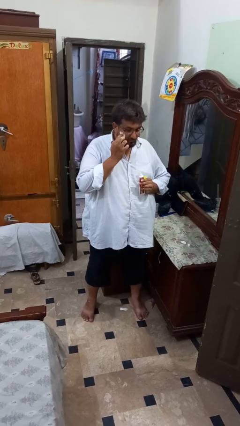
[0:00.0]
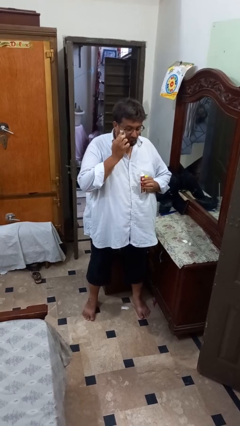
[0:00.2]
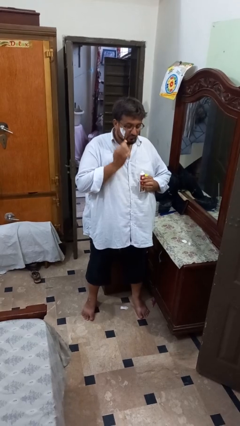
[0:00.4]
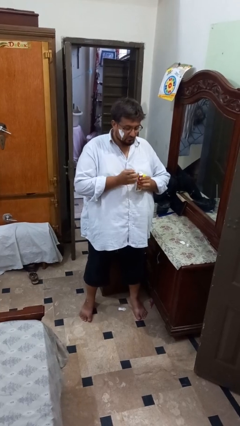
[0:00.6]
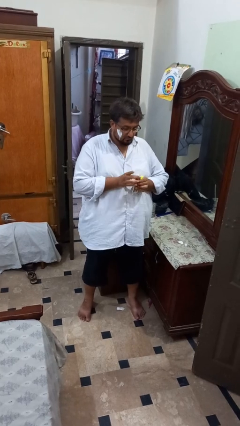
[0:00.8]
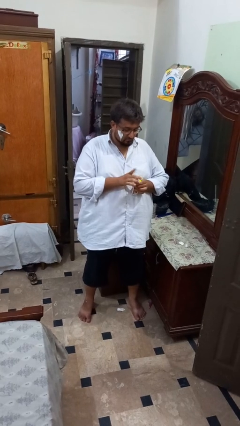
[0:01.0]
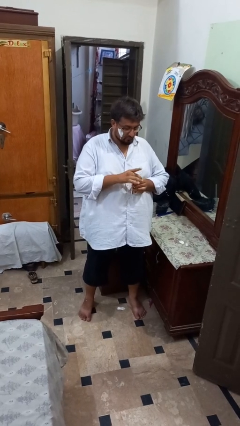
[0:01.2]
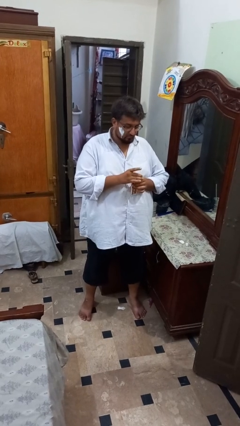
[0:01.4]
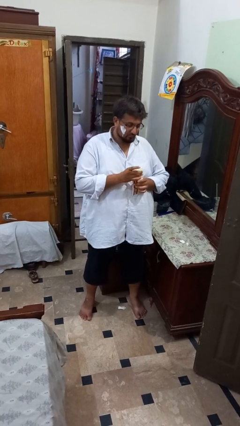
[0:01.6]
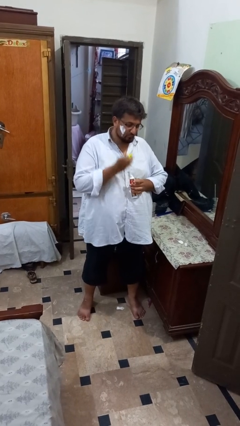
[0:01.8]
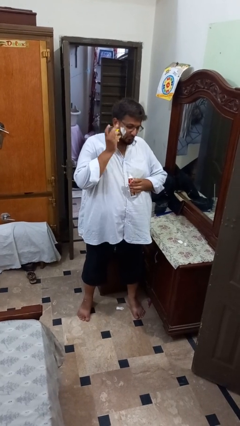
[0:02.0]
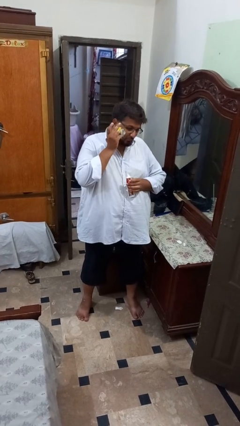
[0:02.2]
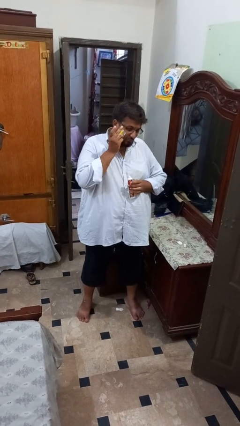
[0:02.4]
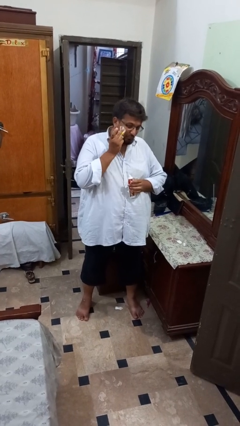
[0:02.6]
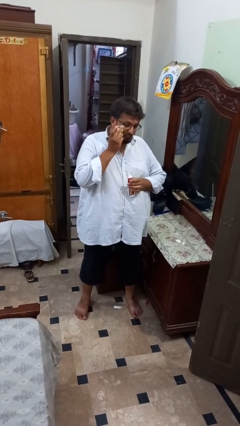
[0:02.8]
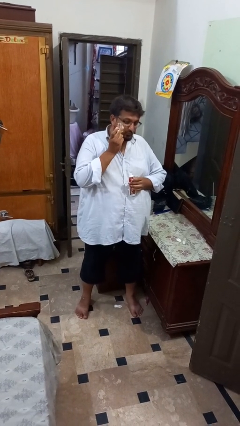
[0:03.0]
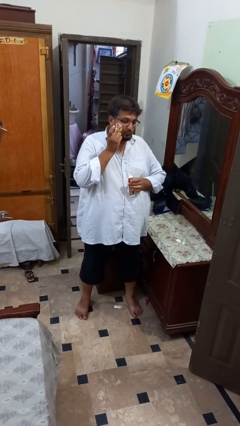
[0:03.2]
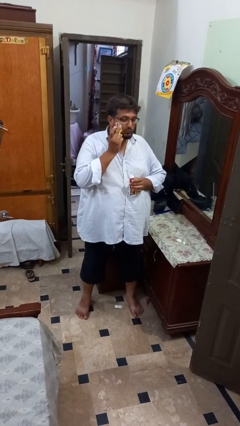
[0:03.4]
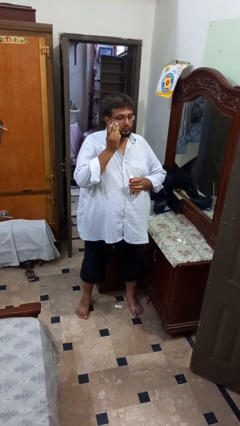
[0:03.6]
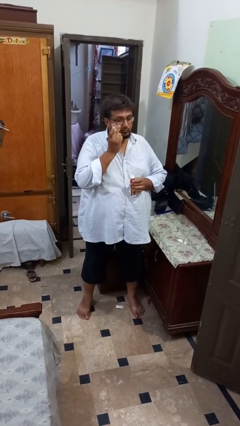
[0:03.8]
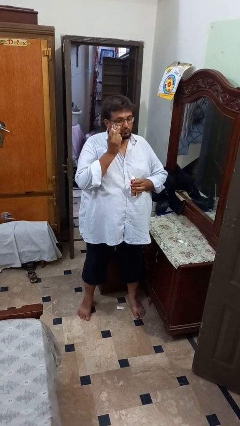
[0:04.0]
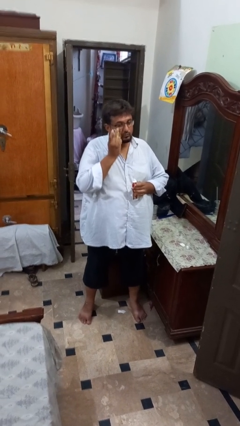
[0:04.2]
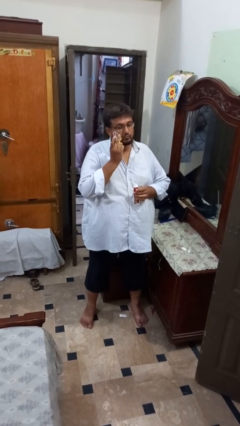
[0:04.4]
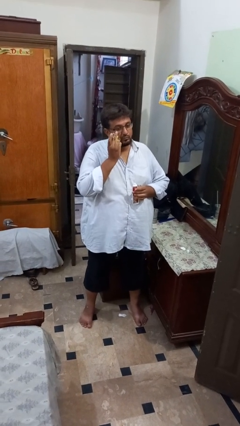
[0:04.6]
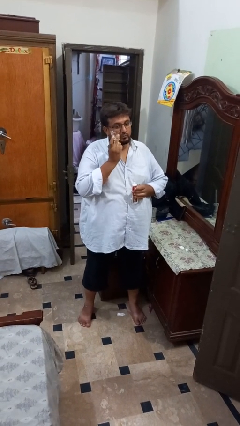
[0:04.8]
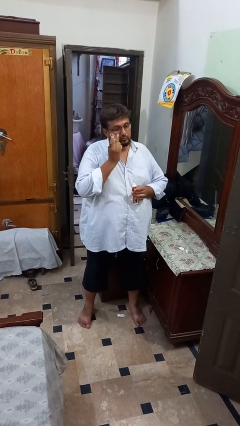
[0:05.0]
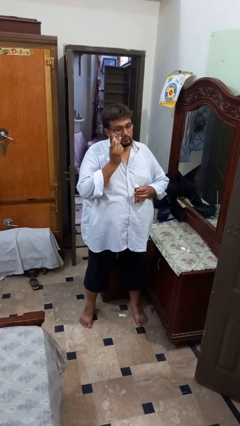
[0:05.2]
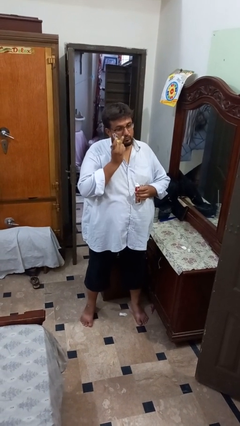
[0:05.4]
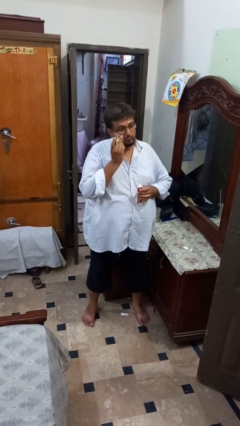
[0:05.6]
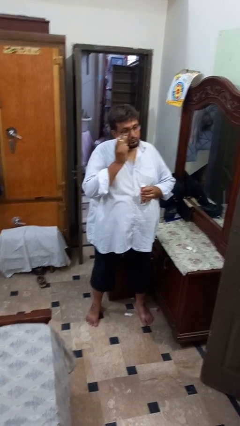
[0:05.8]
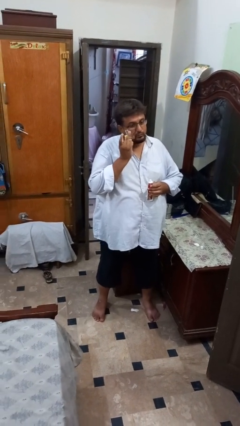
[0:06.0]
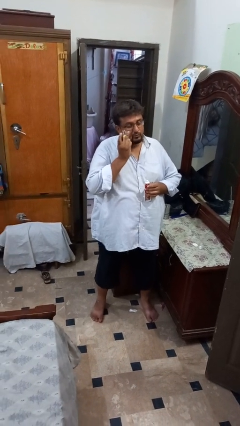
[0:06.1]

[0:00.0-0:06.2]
person shaves face

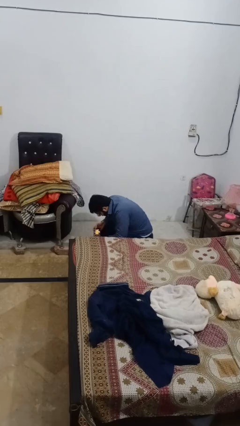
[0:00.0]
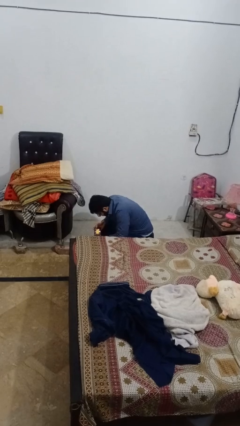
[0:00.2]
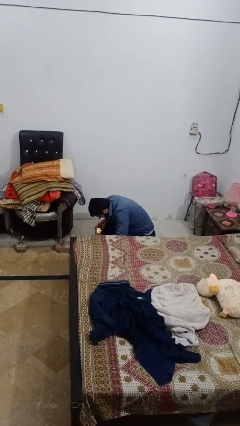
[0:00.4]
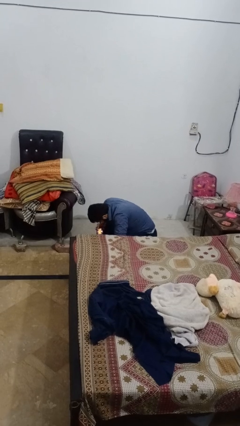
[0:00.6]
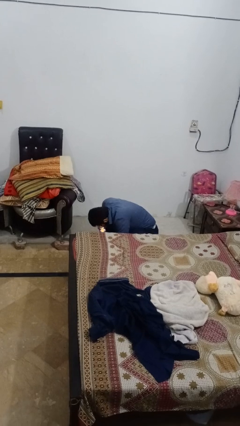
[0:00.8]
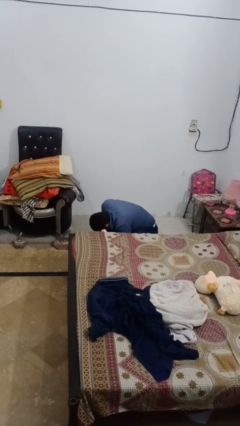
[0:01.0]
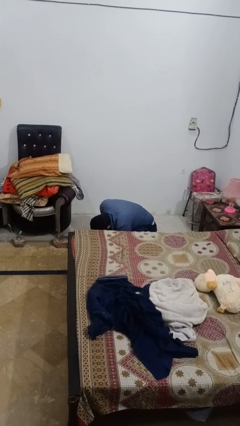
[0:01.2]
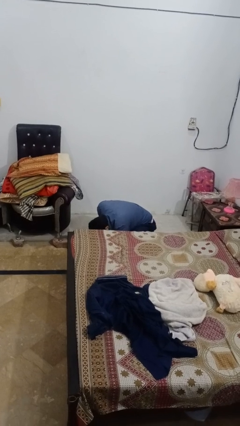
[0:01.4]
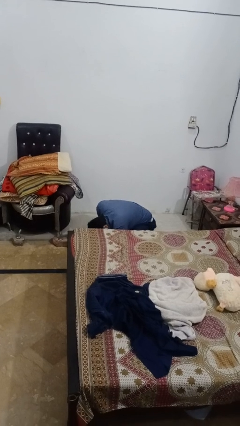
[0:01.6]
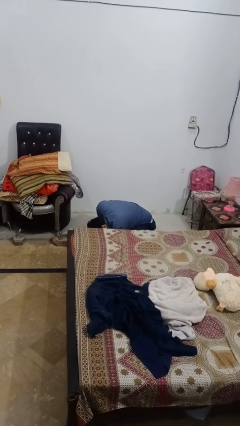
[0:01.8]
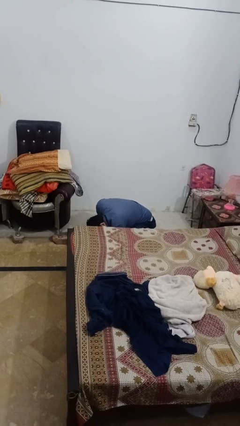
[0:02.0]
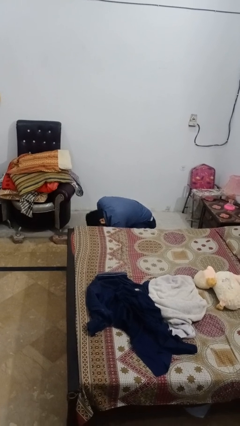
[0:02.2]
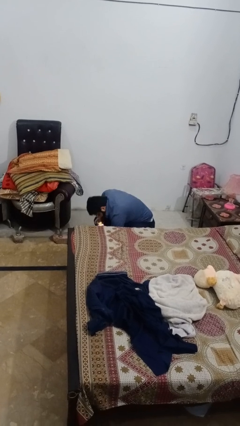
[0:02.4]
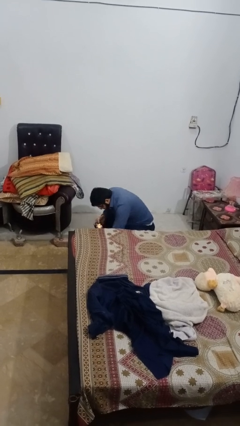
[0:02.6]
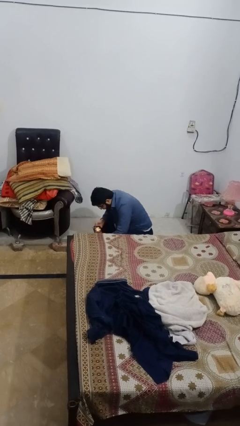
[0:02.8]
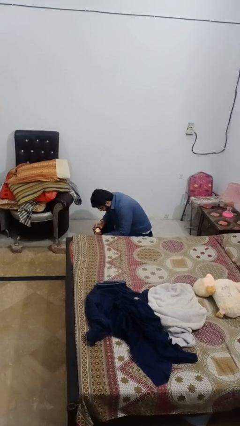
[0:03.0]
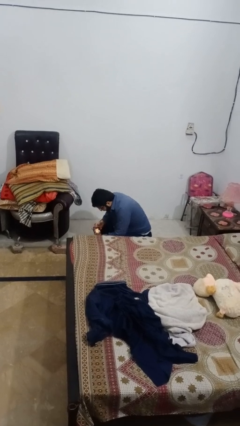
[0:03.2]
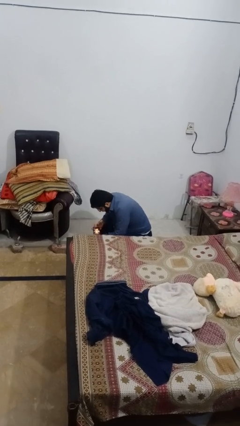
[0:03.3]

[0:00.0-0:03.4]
person searches under bed

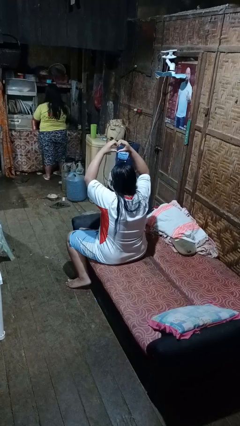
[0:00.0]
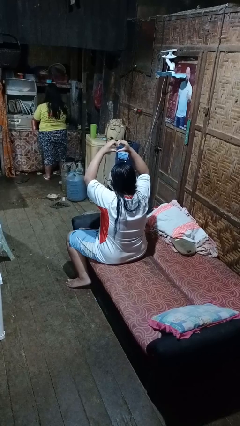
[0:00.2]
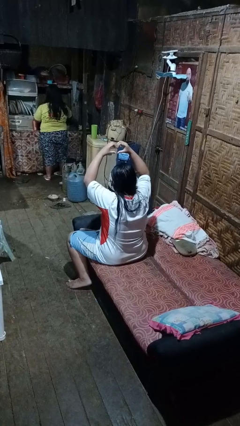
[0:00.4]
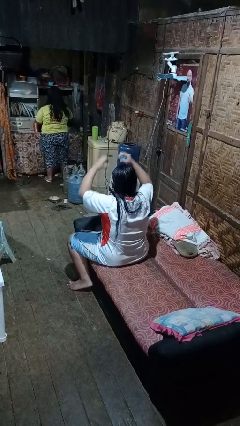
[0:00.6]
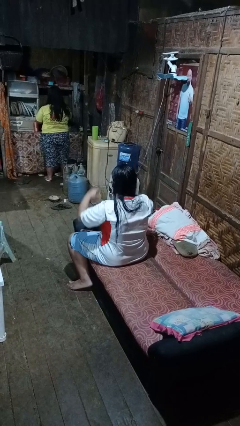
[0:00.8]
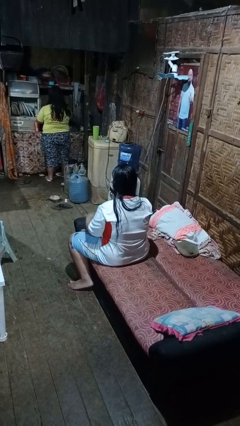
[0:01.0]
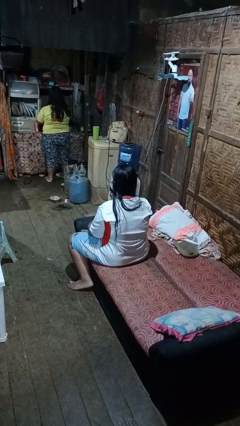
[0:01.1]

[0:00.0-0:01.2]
person gestures heart

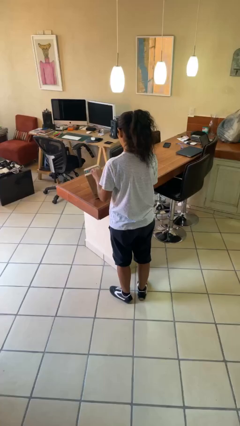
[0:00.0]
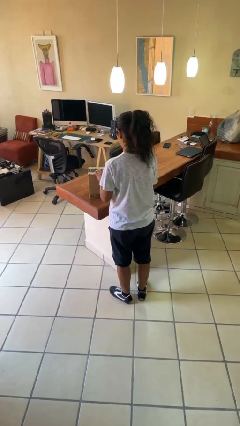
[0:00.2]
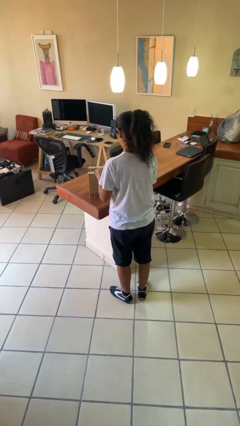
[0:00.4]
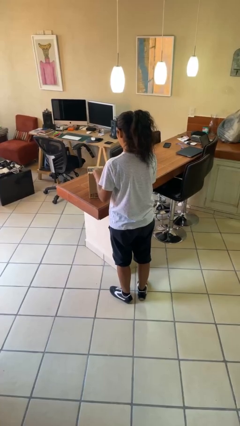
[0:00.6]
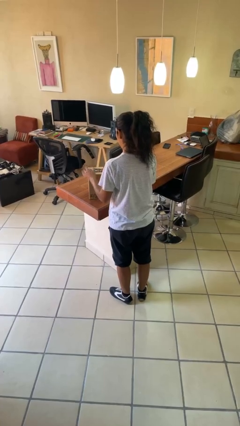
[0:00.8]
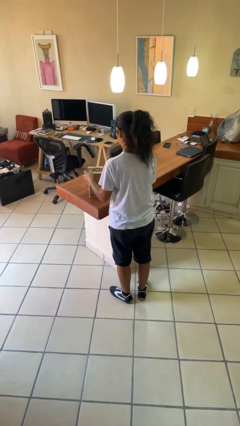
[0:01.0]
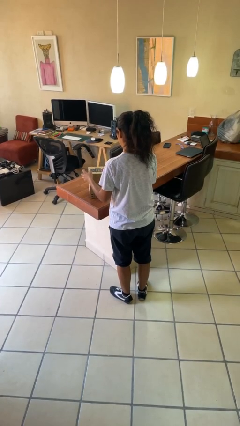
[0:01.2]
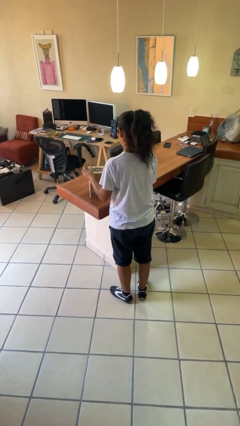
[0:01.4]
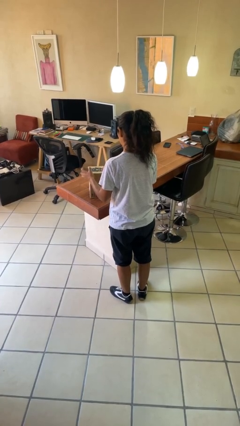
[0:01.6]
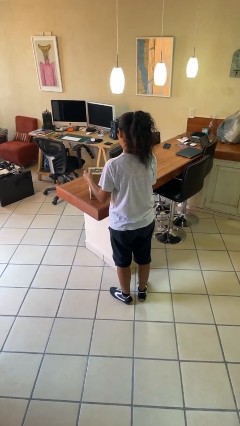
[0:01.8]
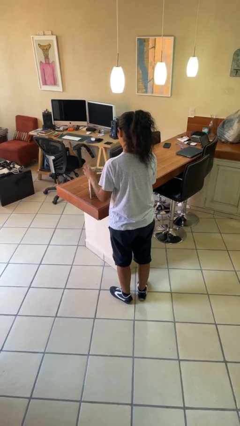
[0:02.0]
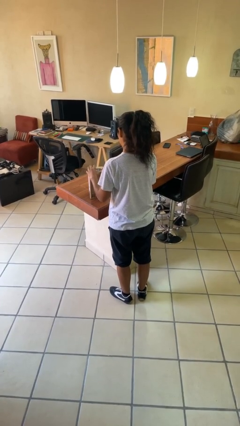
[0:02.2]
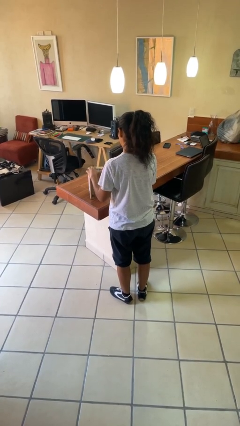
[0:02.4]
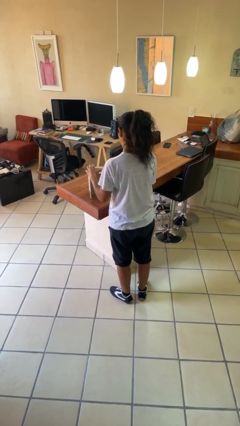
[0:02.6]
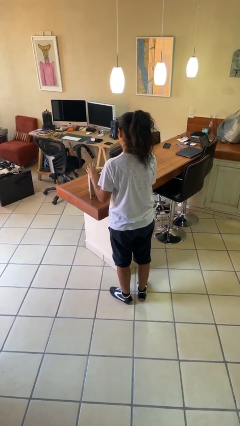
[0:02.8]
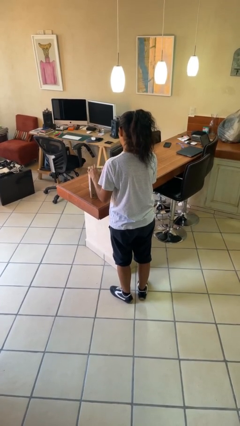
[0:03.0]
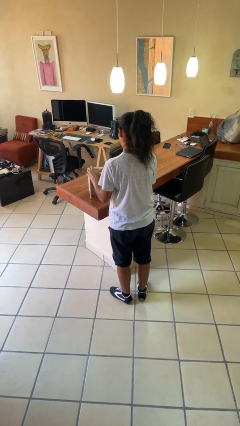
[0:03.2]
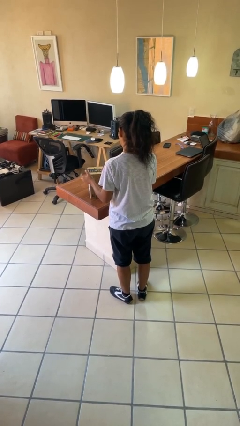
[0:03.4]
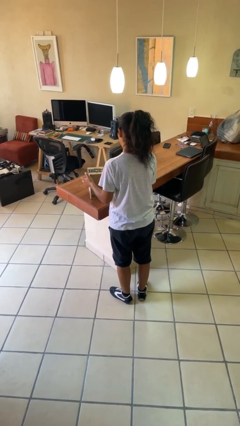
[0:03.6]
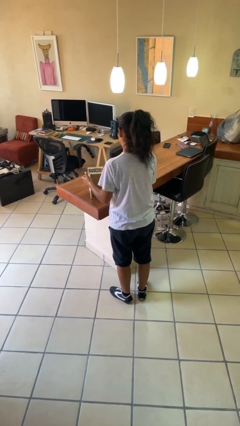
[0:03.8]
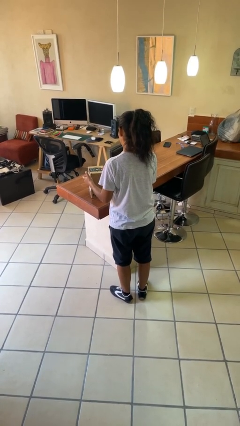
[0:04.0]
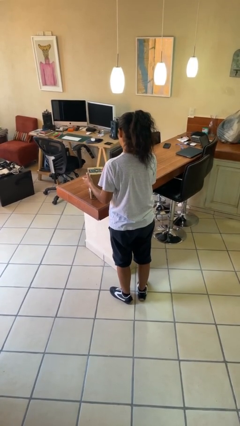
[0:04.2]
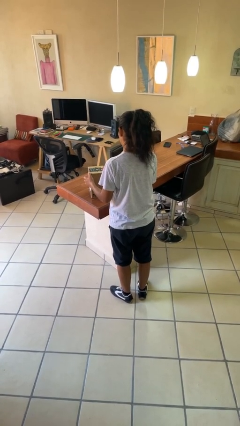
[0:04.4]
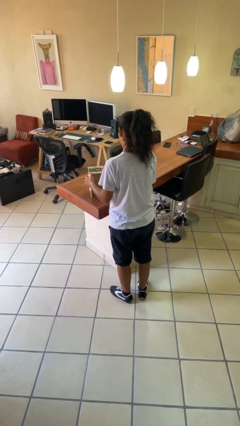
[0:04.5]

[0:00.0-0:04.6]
person taps object with finger

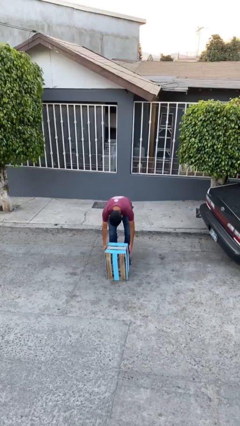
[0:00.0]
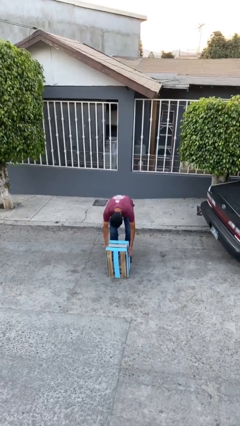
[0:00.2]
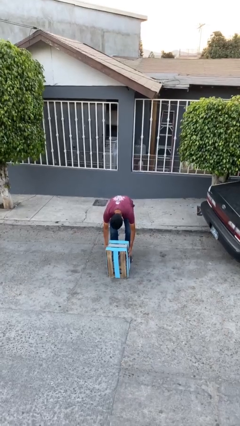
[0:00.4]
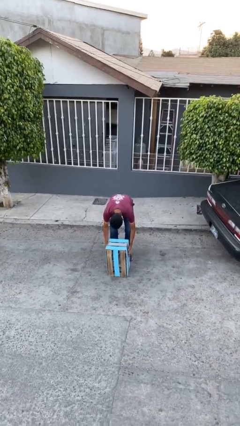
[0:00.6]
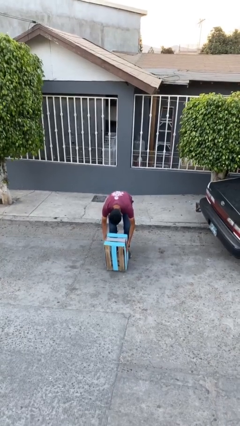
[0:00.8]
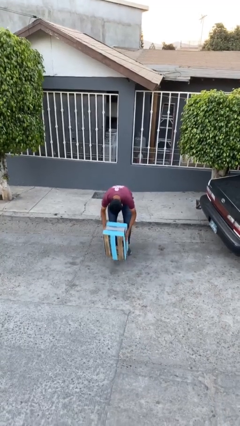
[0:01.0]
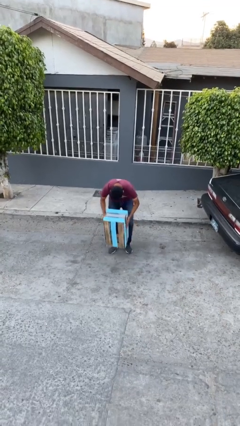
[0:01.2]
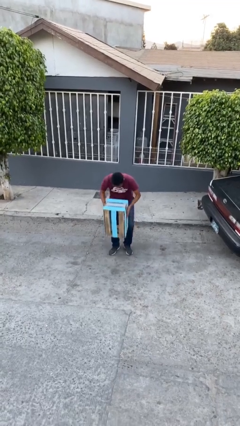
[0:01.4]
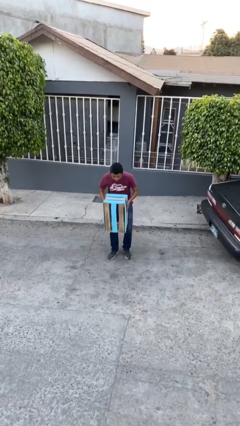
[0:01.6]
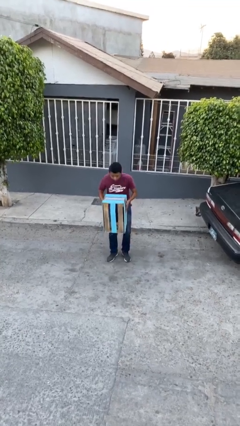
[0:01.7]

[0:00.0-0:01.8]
person picks up object from floor

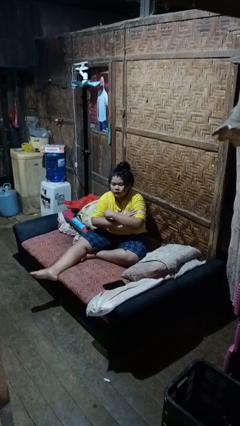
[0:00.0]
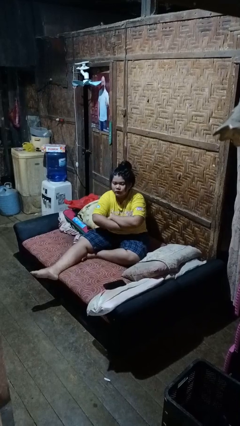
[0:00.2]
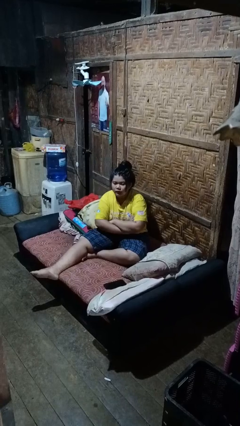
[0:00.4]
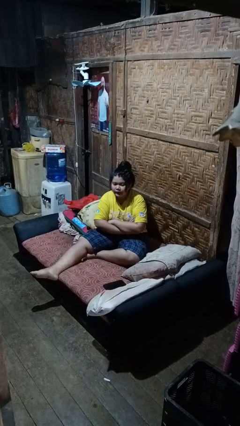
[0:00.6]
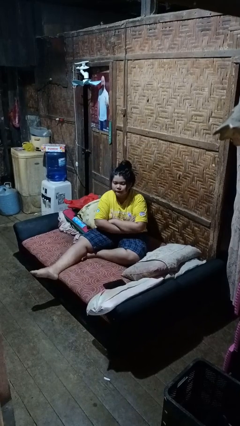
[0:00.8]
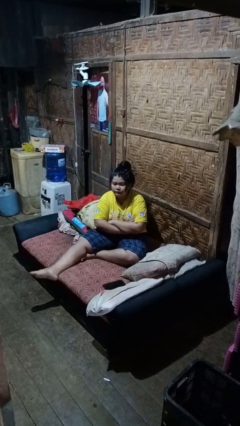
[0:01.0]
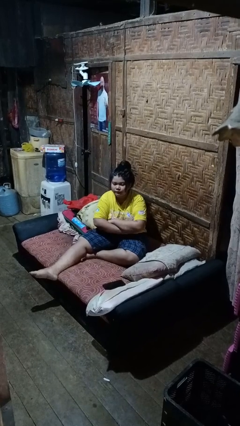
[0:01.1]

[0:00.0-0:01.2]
person gestures arms x
